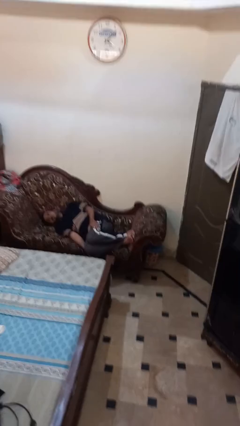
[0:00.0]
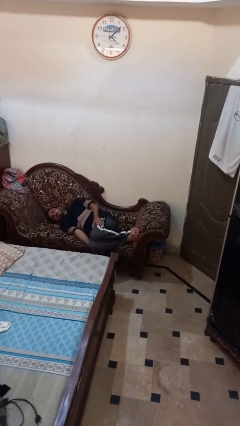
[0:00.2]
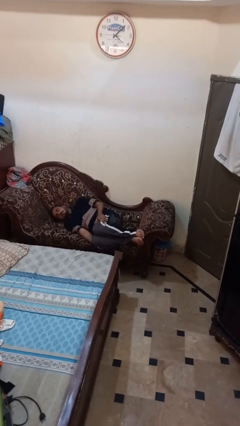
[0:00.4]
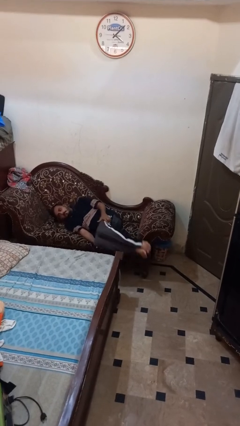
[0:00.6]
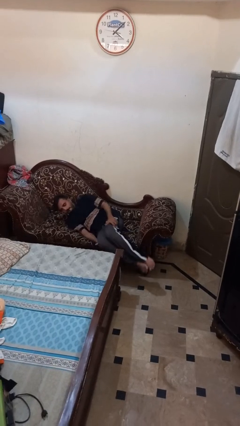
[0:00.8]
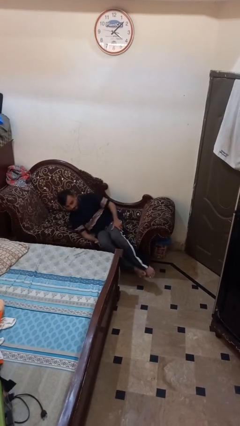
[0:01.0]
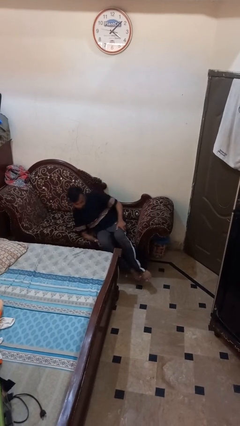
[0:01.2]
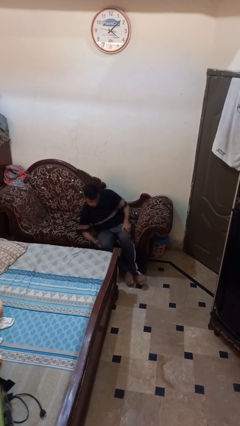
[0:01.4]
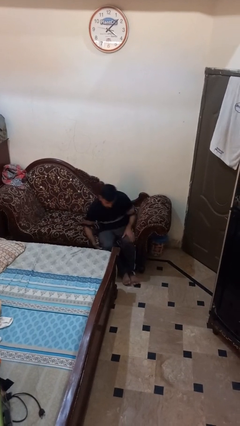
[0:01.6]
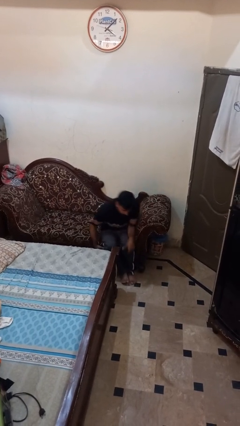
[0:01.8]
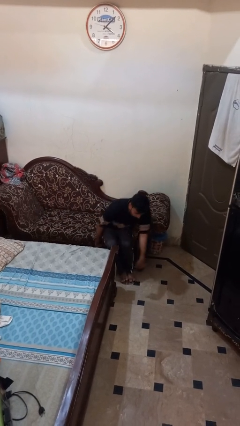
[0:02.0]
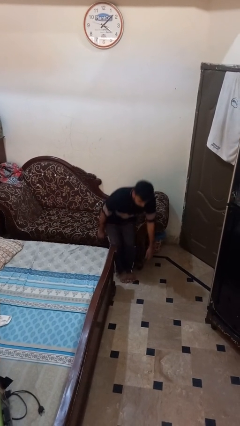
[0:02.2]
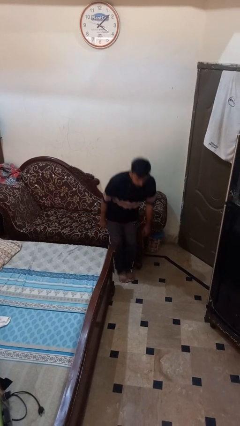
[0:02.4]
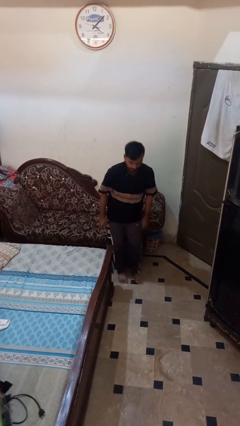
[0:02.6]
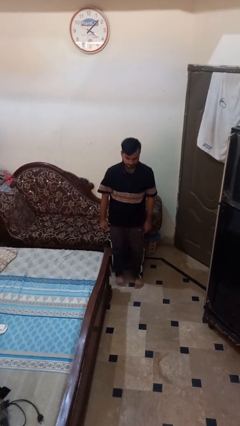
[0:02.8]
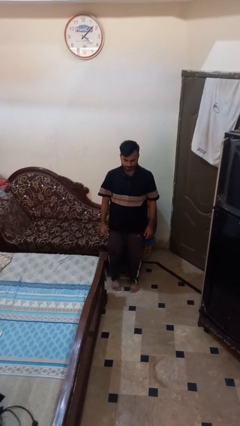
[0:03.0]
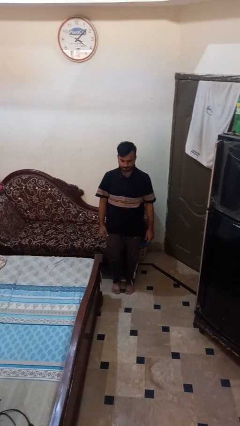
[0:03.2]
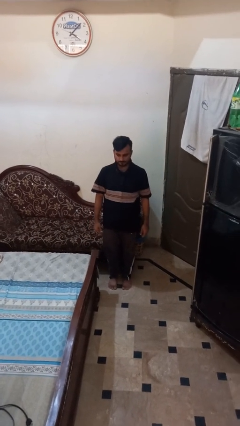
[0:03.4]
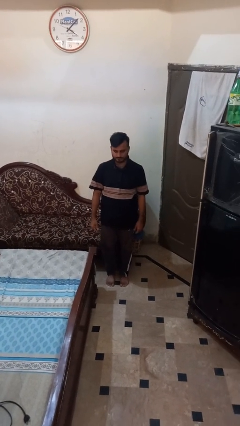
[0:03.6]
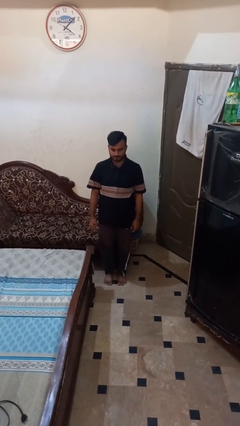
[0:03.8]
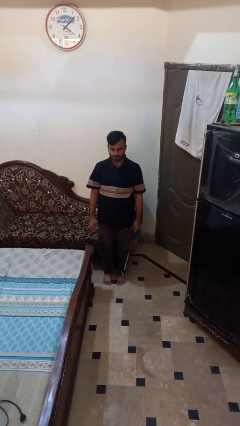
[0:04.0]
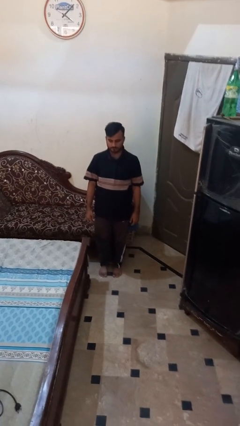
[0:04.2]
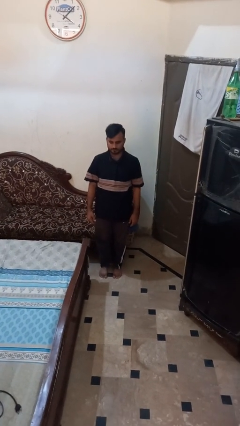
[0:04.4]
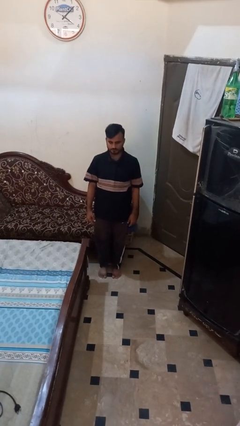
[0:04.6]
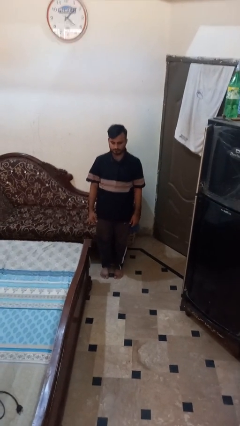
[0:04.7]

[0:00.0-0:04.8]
person stands up

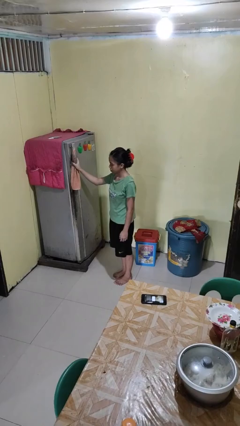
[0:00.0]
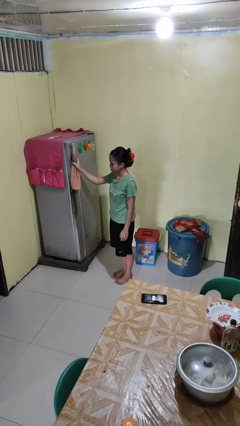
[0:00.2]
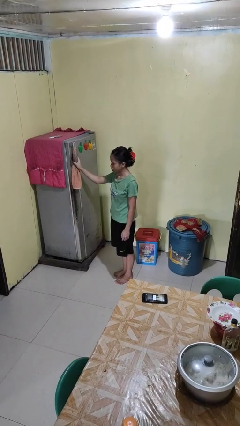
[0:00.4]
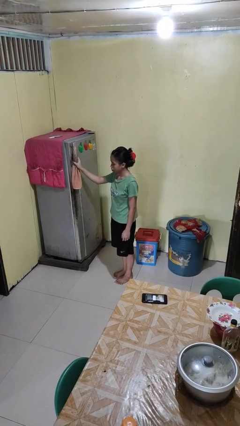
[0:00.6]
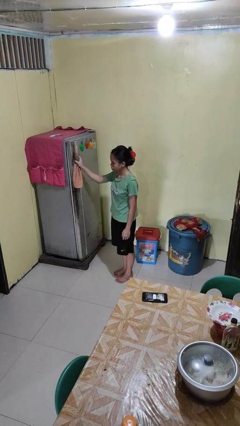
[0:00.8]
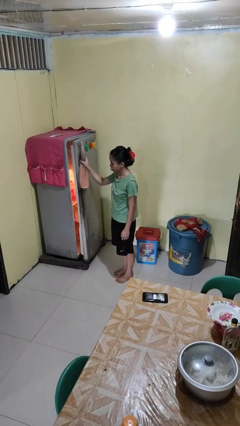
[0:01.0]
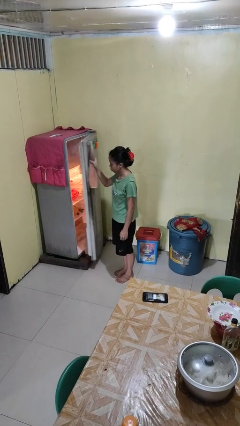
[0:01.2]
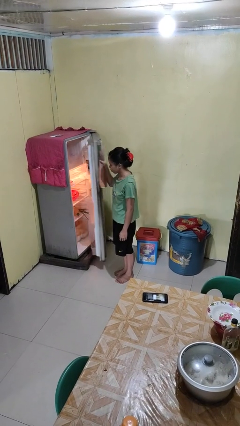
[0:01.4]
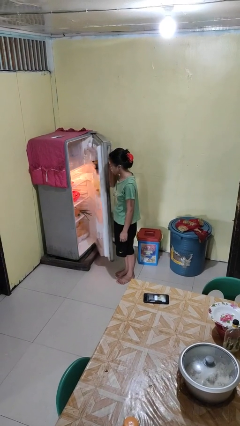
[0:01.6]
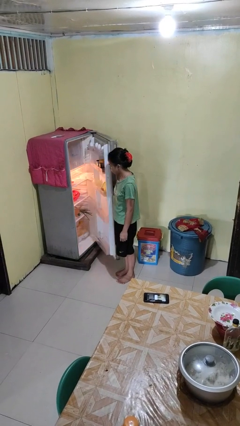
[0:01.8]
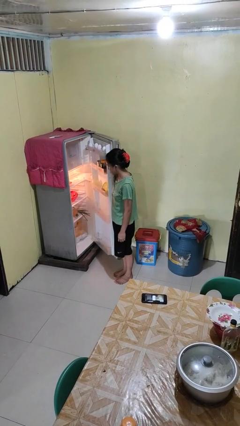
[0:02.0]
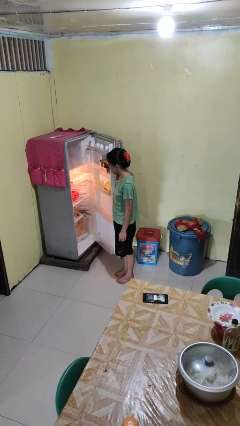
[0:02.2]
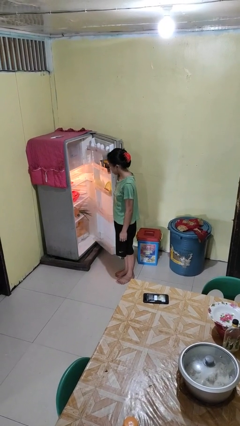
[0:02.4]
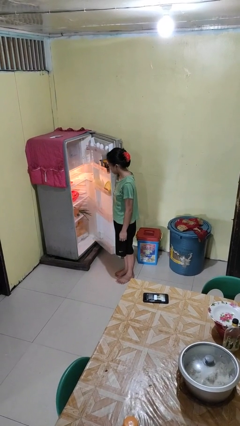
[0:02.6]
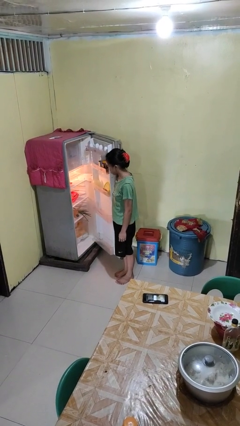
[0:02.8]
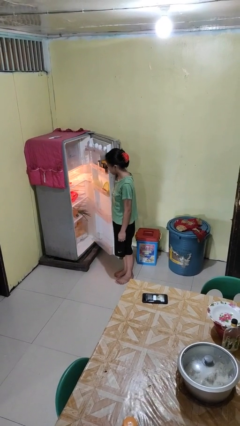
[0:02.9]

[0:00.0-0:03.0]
person opens refrigerator

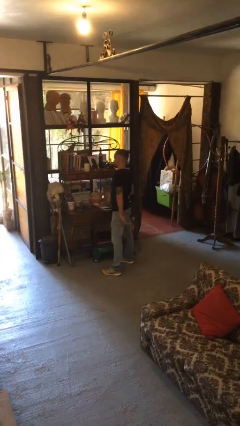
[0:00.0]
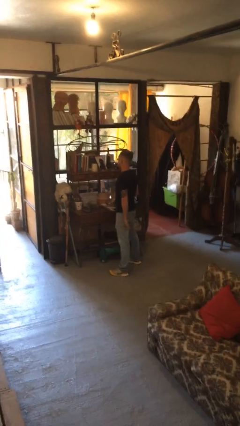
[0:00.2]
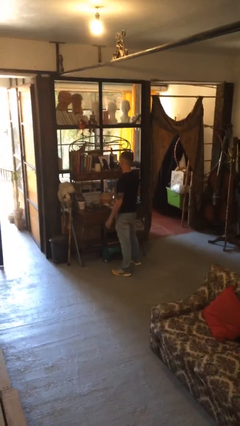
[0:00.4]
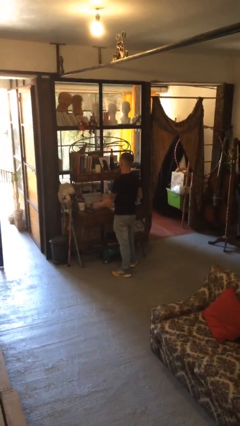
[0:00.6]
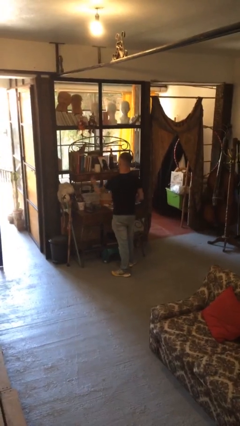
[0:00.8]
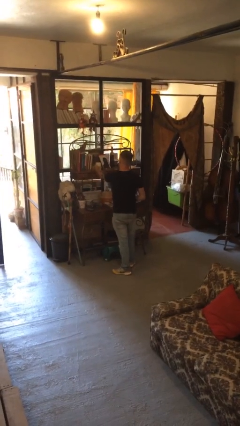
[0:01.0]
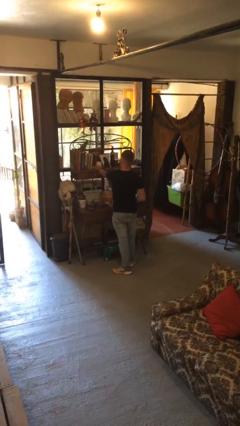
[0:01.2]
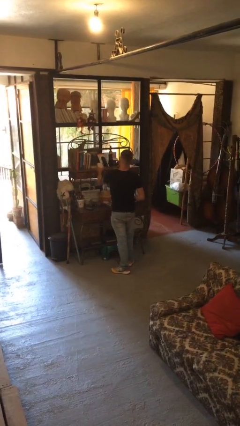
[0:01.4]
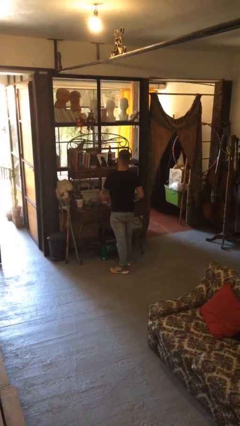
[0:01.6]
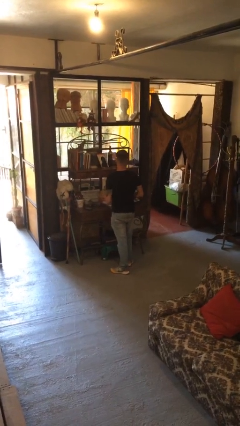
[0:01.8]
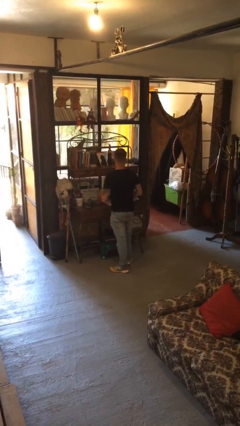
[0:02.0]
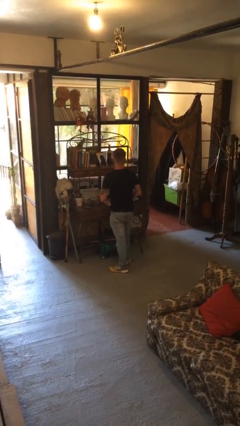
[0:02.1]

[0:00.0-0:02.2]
person picks up object from countertop

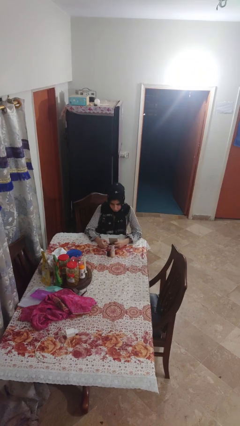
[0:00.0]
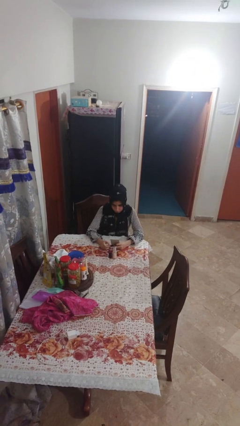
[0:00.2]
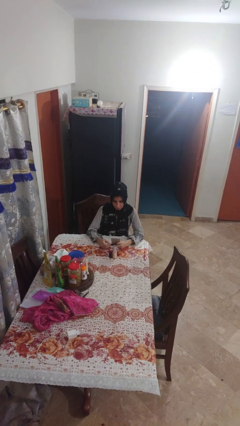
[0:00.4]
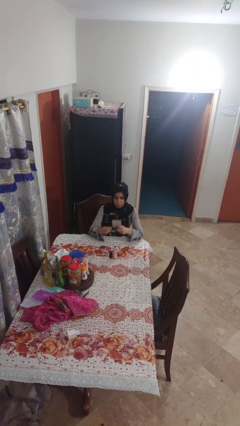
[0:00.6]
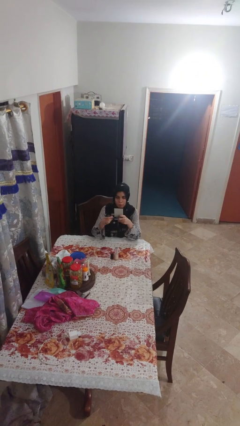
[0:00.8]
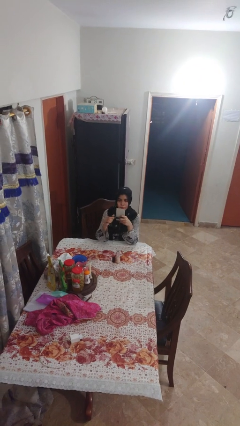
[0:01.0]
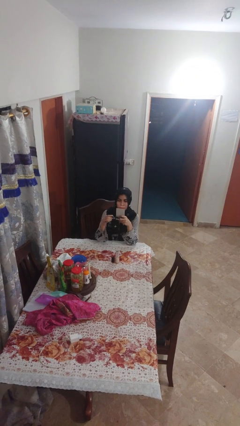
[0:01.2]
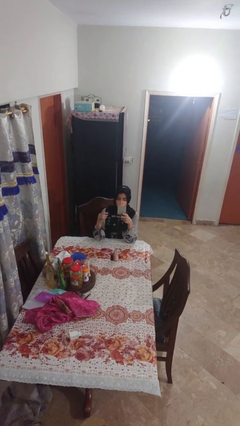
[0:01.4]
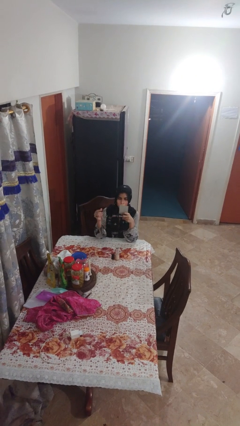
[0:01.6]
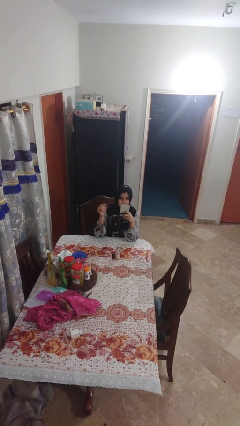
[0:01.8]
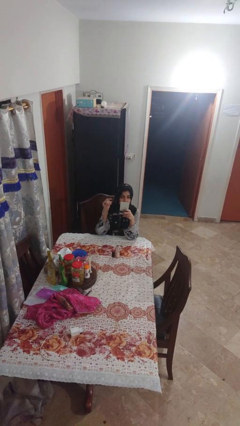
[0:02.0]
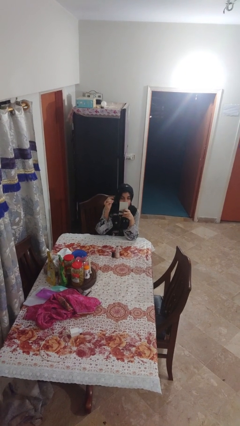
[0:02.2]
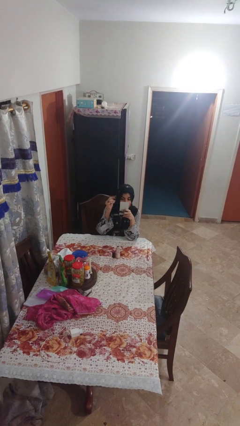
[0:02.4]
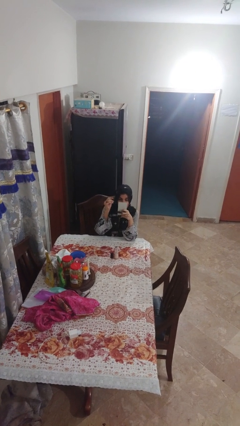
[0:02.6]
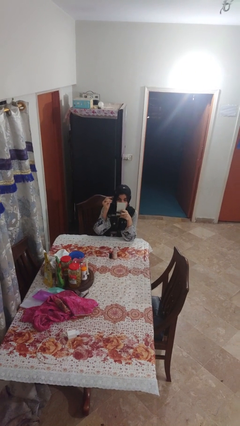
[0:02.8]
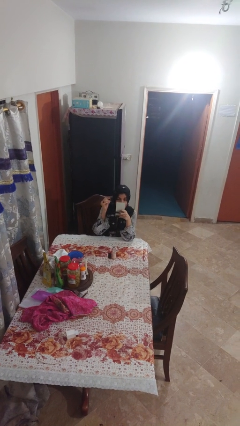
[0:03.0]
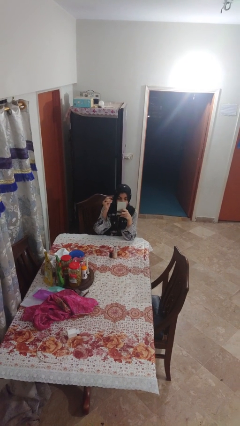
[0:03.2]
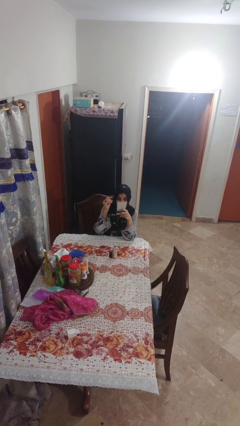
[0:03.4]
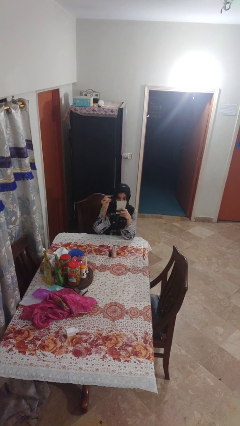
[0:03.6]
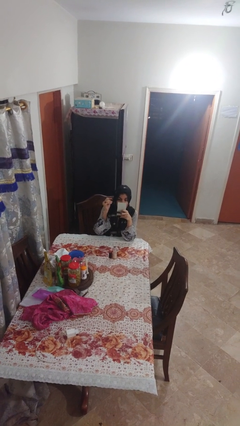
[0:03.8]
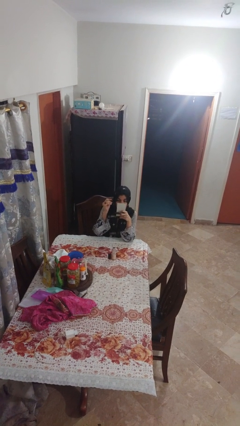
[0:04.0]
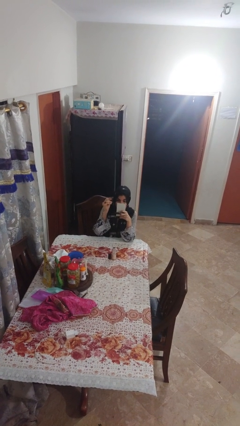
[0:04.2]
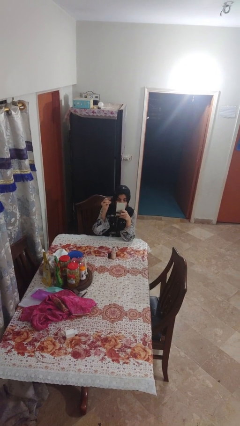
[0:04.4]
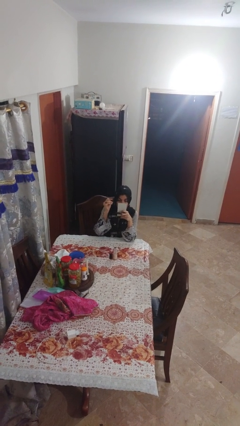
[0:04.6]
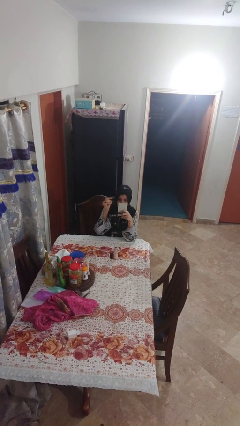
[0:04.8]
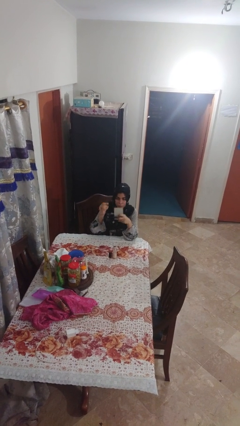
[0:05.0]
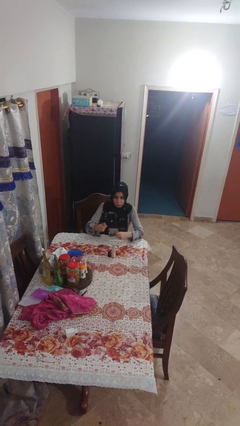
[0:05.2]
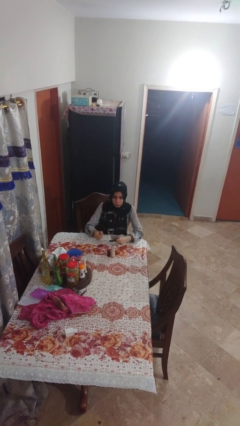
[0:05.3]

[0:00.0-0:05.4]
person applies eye makeup

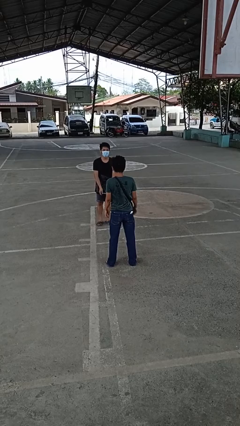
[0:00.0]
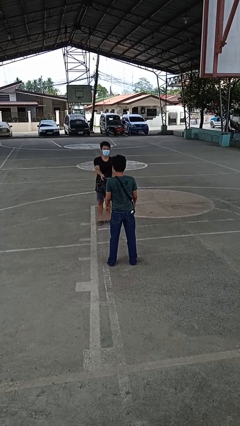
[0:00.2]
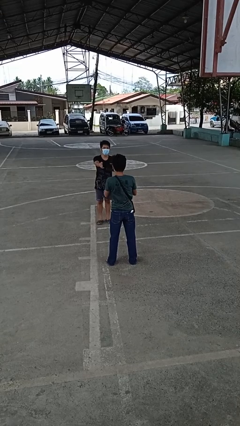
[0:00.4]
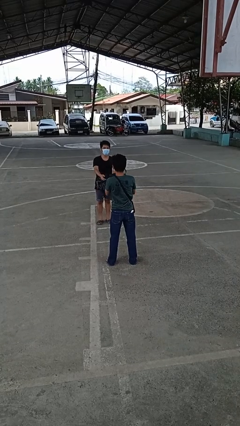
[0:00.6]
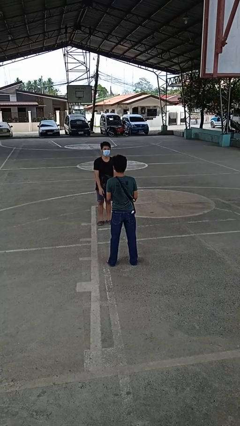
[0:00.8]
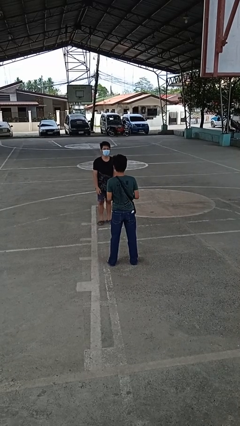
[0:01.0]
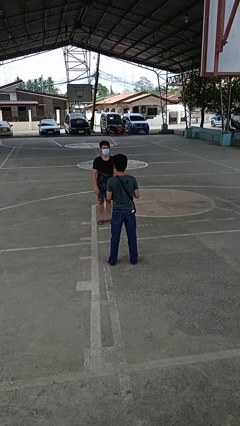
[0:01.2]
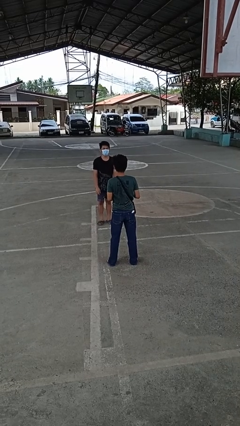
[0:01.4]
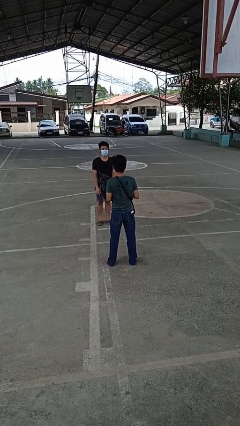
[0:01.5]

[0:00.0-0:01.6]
person catches object from person

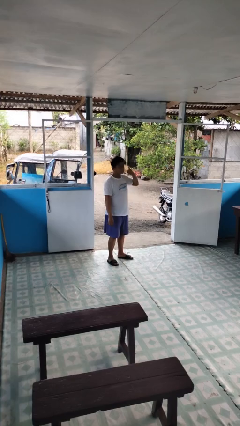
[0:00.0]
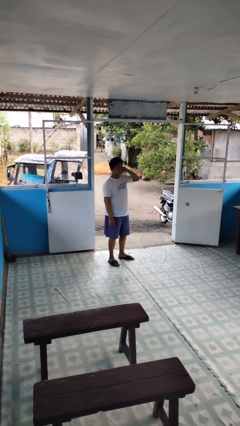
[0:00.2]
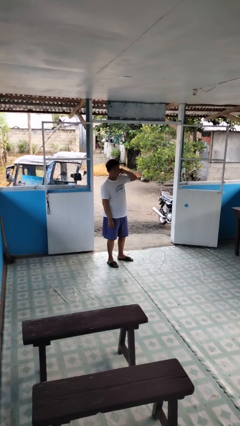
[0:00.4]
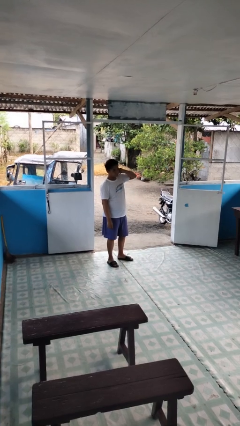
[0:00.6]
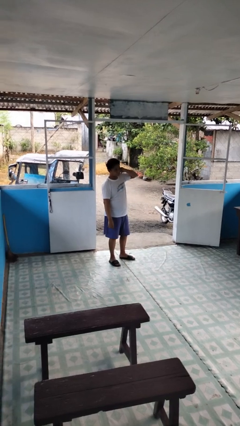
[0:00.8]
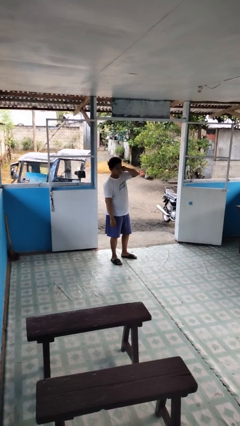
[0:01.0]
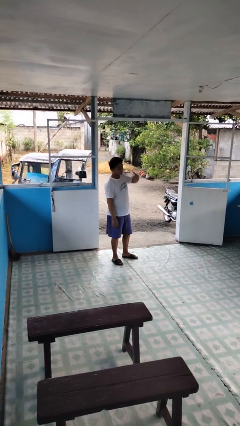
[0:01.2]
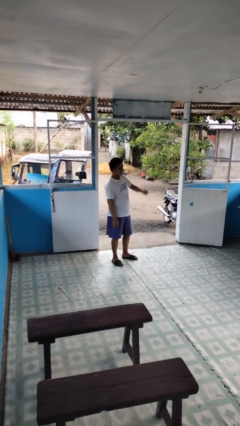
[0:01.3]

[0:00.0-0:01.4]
person gestures call me
